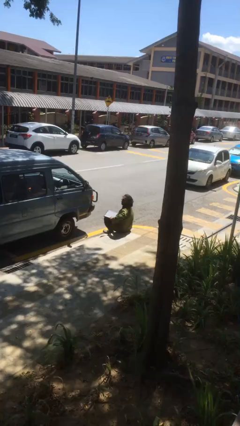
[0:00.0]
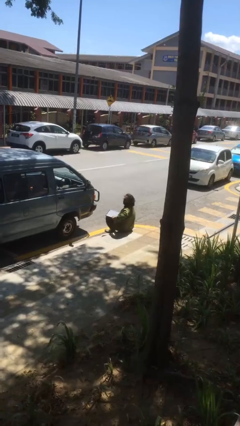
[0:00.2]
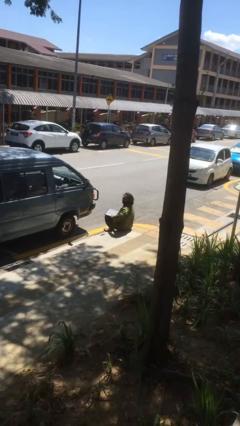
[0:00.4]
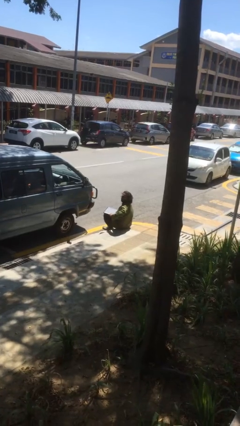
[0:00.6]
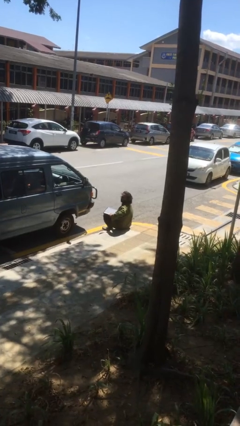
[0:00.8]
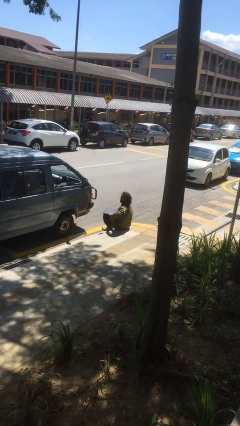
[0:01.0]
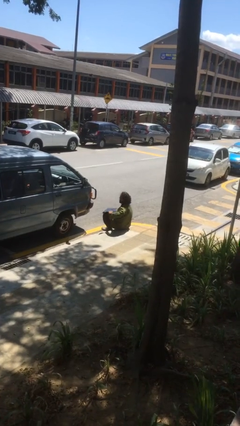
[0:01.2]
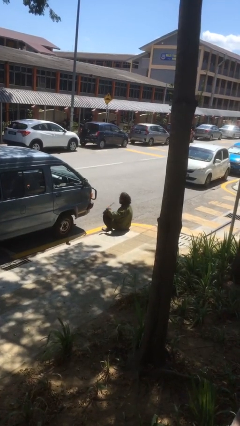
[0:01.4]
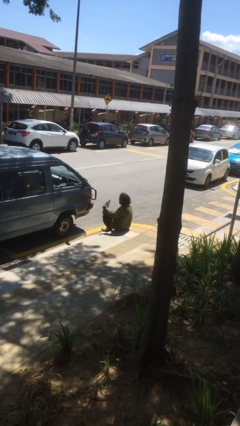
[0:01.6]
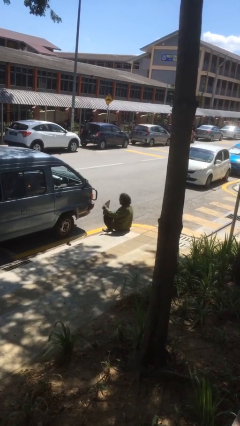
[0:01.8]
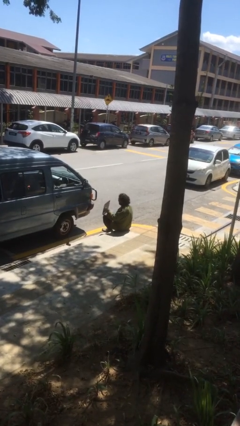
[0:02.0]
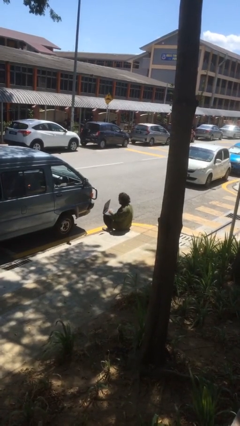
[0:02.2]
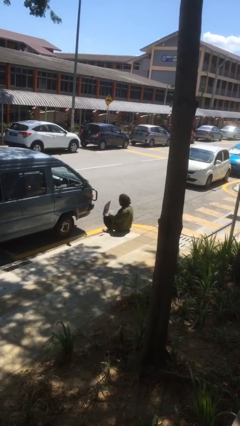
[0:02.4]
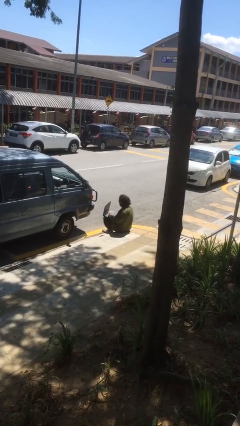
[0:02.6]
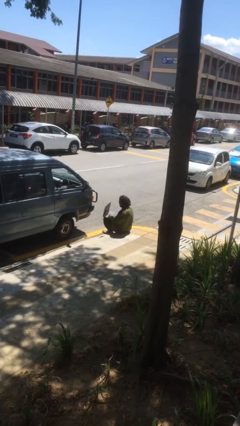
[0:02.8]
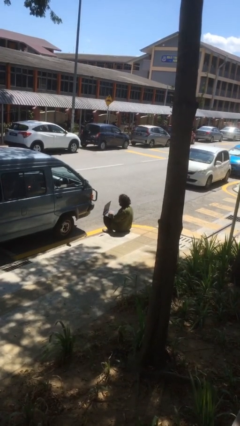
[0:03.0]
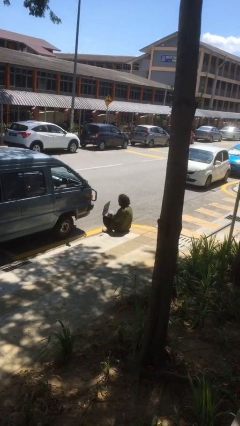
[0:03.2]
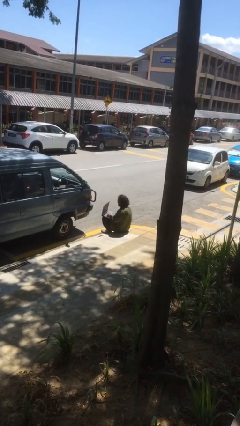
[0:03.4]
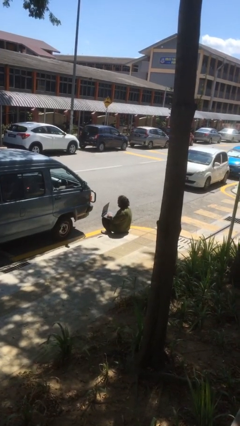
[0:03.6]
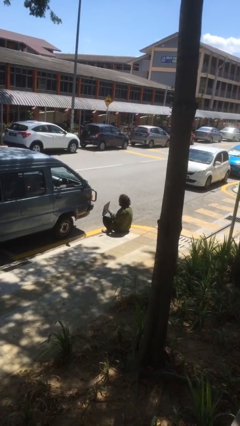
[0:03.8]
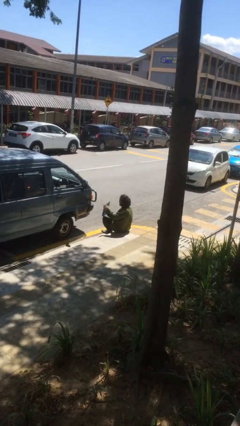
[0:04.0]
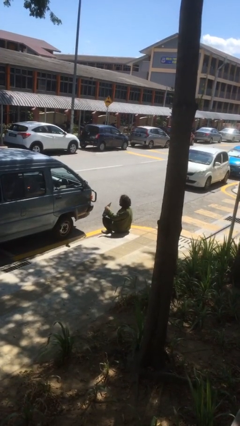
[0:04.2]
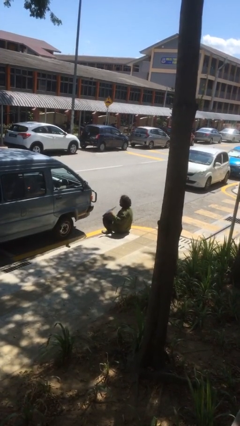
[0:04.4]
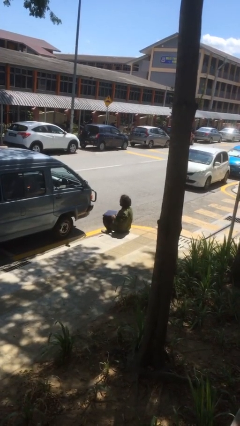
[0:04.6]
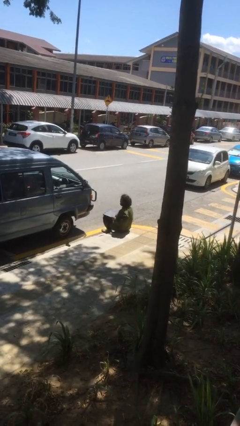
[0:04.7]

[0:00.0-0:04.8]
person interacts with laptop

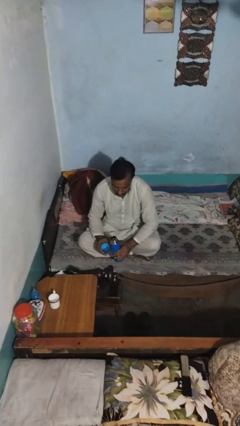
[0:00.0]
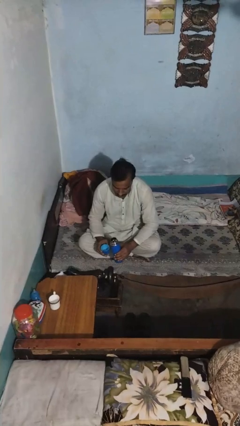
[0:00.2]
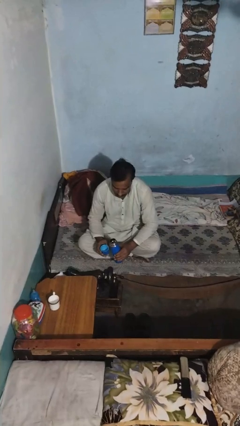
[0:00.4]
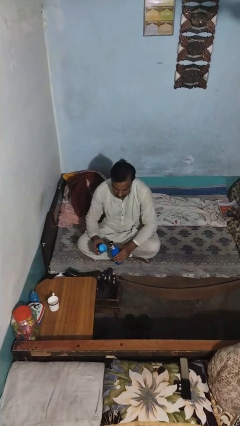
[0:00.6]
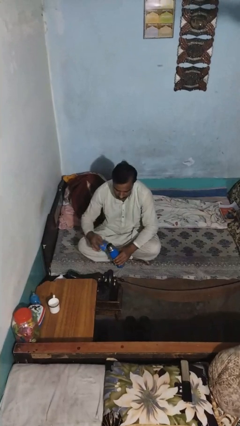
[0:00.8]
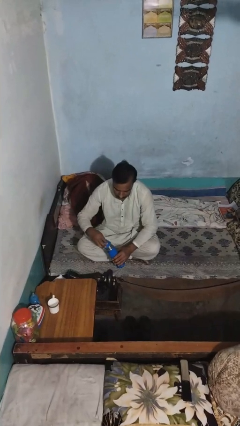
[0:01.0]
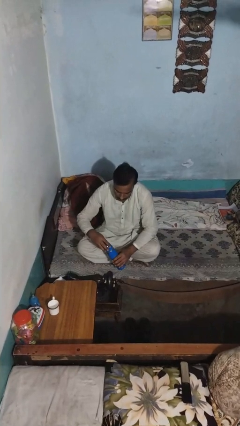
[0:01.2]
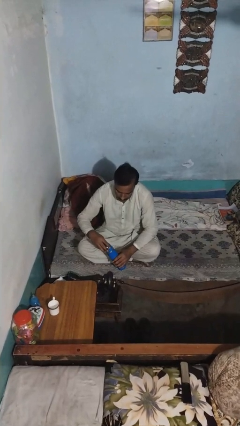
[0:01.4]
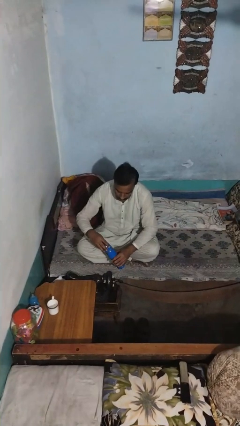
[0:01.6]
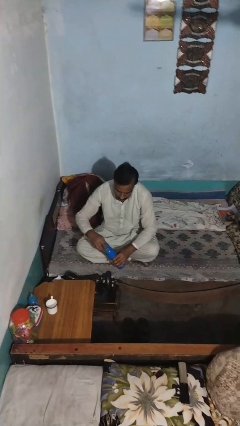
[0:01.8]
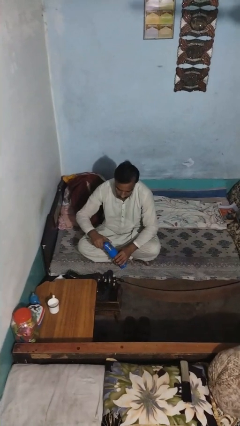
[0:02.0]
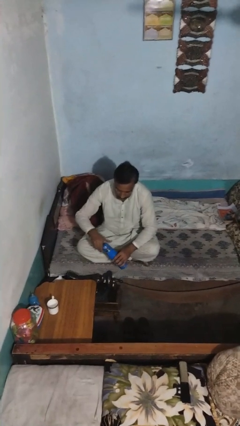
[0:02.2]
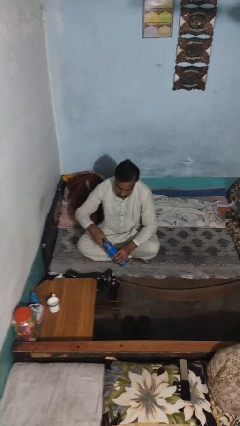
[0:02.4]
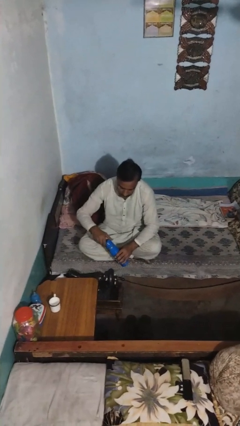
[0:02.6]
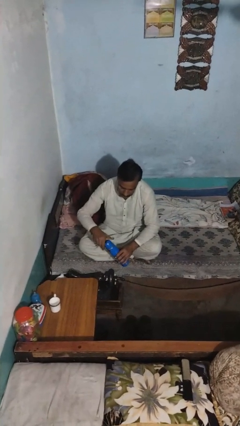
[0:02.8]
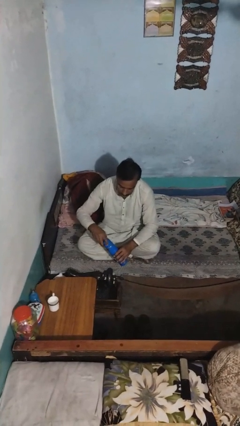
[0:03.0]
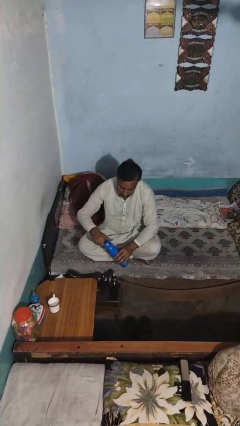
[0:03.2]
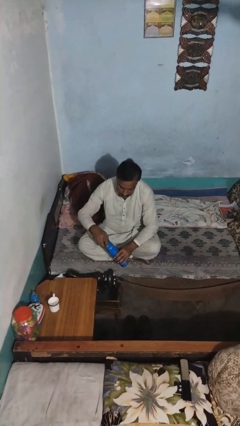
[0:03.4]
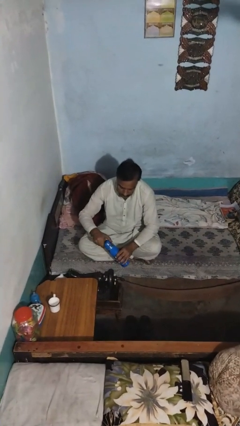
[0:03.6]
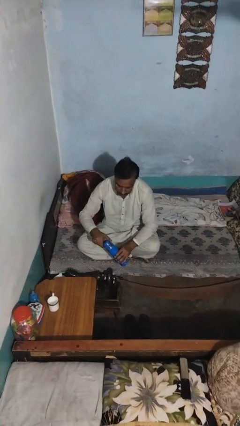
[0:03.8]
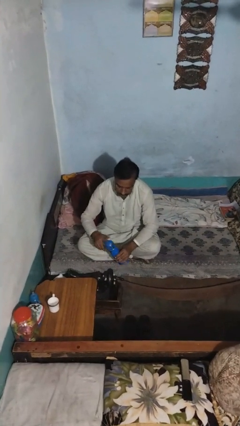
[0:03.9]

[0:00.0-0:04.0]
person screws lid to bottle

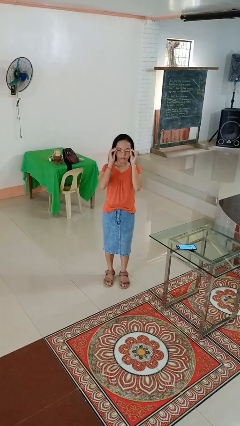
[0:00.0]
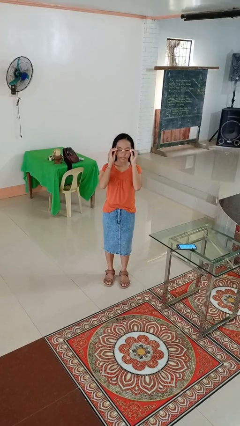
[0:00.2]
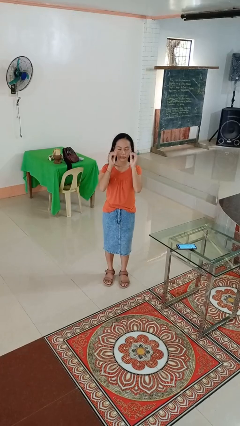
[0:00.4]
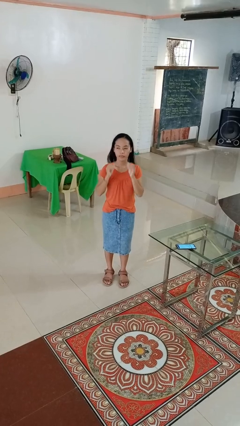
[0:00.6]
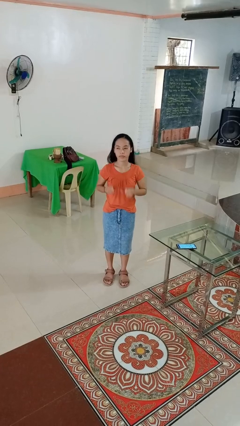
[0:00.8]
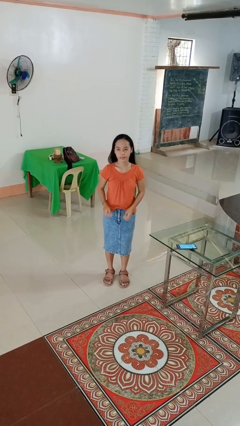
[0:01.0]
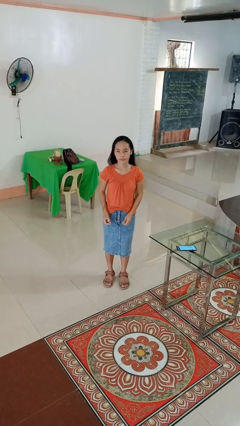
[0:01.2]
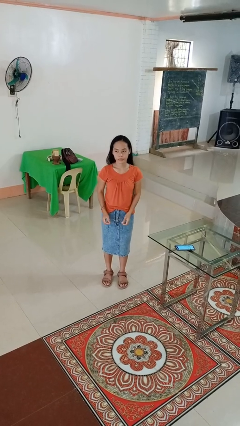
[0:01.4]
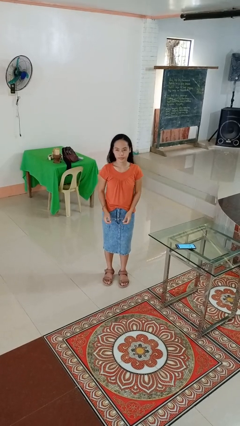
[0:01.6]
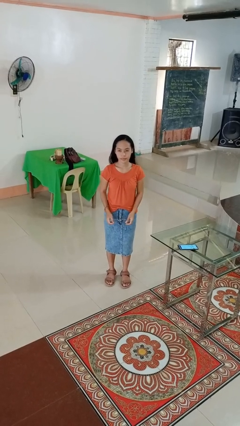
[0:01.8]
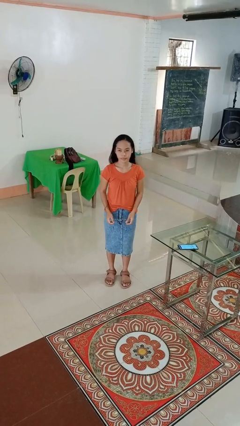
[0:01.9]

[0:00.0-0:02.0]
person takes off glasses

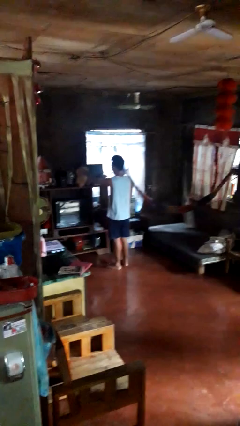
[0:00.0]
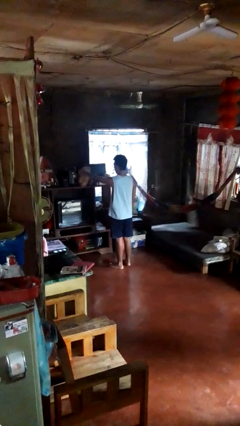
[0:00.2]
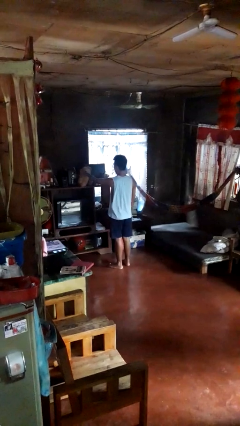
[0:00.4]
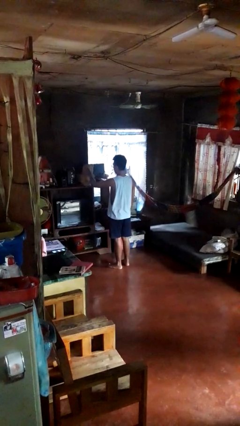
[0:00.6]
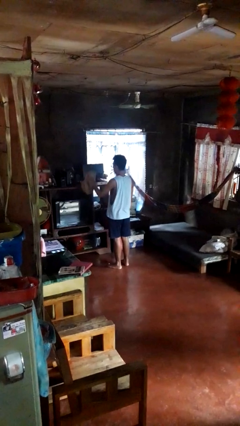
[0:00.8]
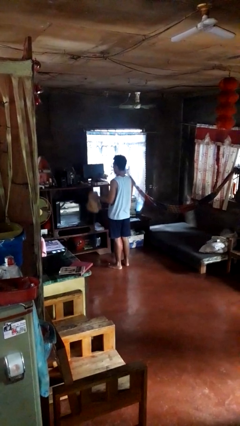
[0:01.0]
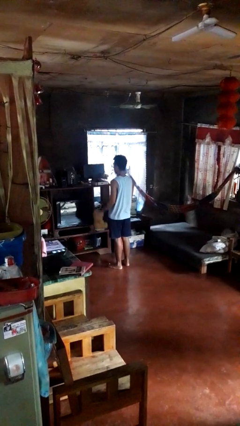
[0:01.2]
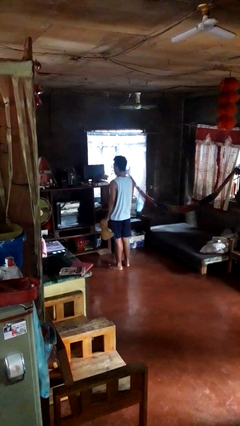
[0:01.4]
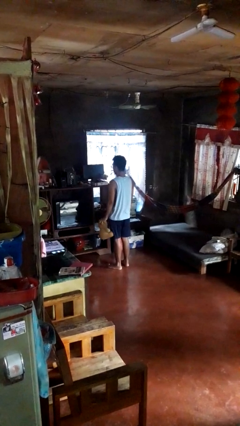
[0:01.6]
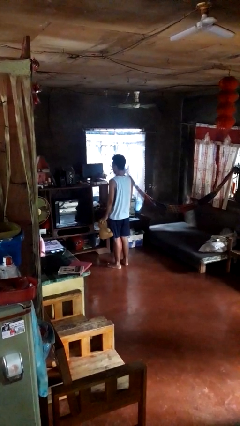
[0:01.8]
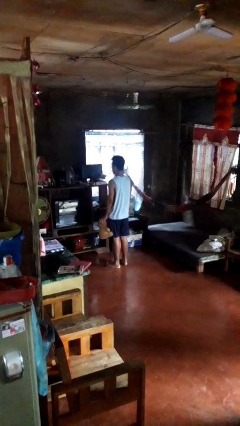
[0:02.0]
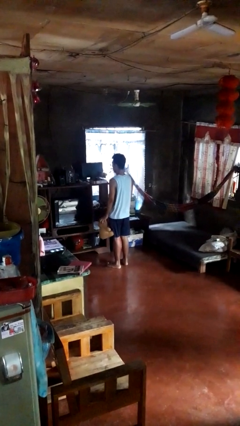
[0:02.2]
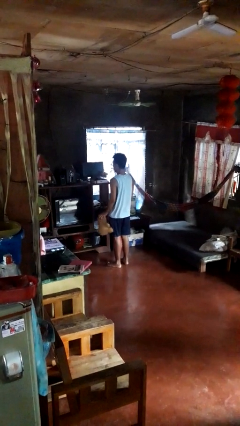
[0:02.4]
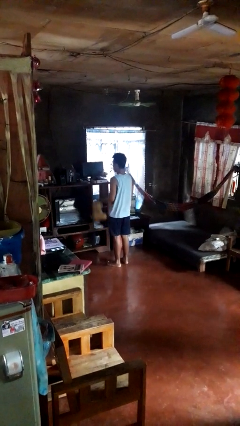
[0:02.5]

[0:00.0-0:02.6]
person picks up object from shelf

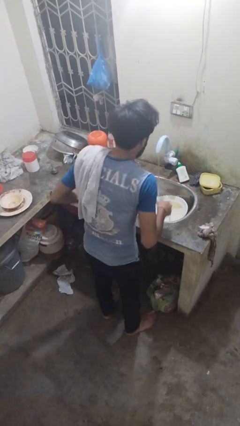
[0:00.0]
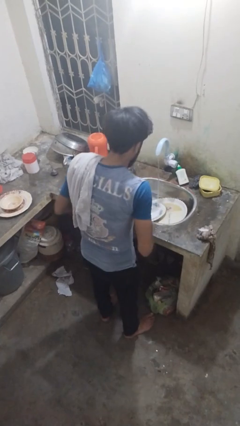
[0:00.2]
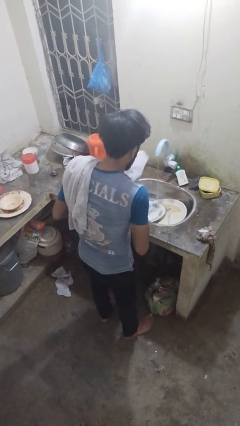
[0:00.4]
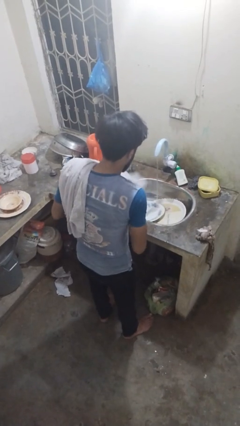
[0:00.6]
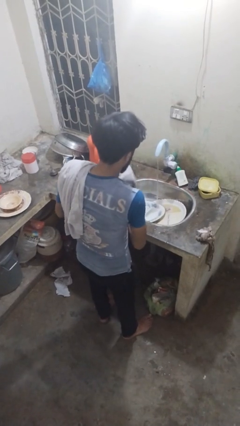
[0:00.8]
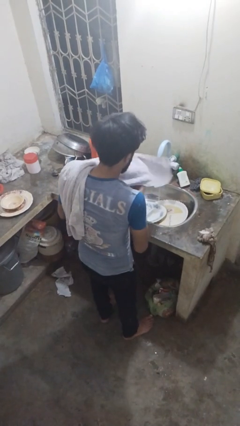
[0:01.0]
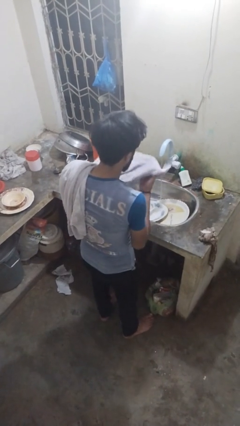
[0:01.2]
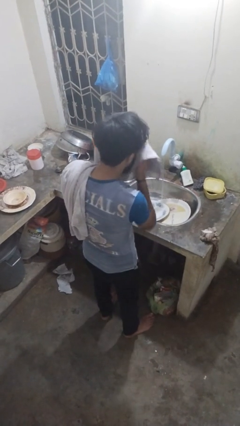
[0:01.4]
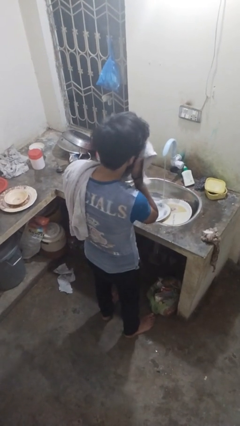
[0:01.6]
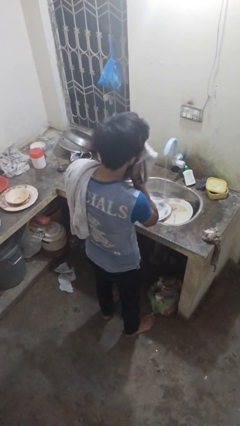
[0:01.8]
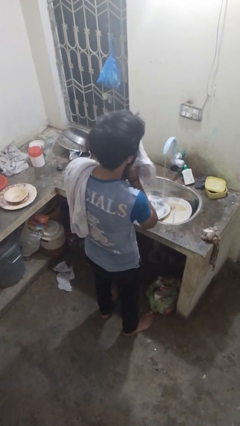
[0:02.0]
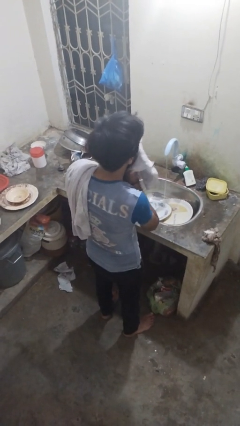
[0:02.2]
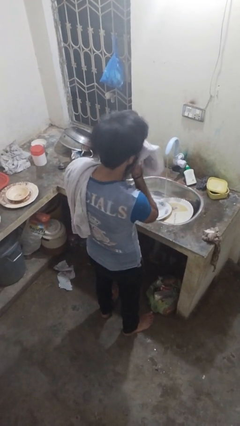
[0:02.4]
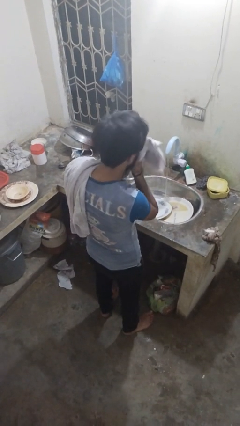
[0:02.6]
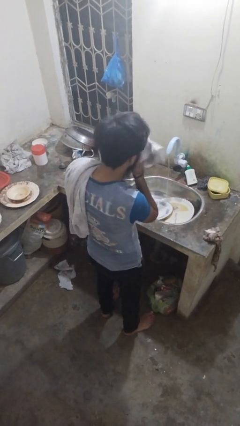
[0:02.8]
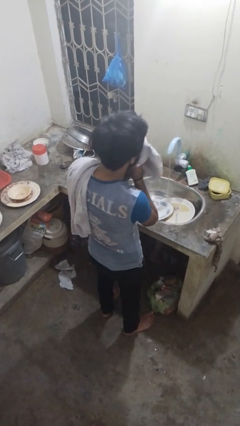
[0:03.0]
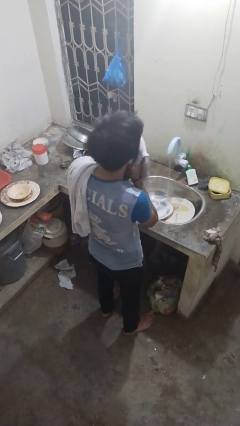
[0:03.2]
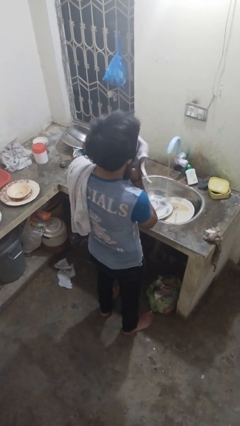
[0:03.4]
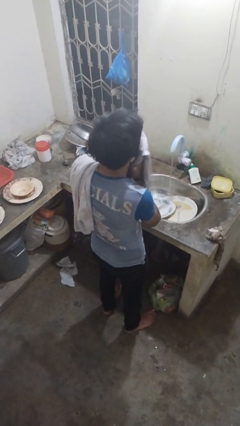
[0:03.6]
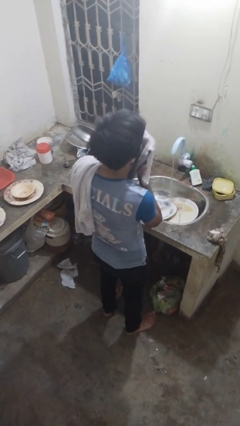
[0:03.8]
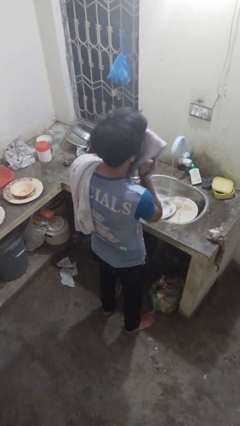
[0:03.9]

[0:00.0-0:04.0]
person dries face with towel

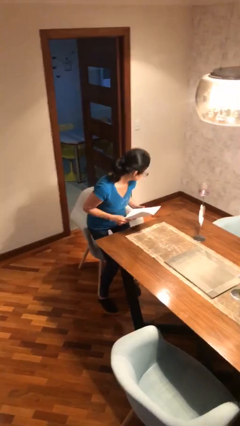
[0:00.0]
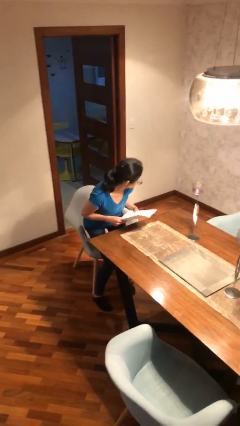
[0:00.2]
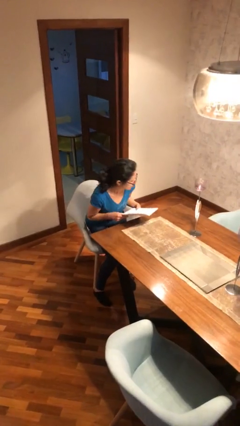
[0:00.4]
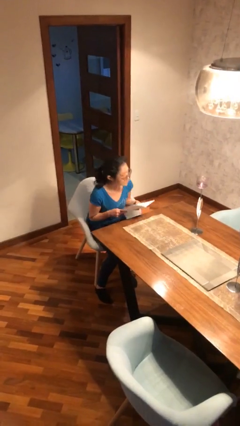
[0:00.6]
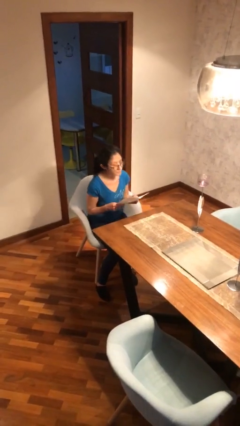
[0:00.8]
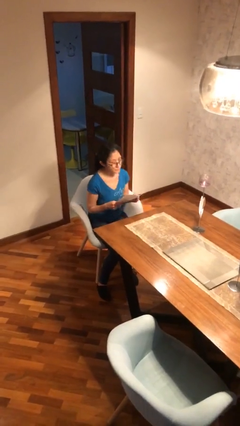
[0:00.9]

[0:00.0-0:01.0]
person sits down
